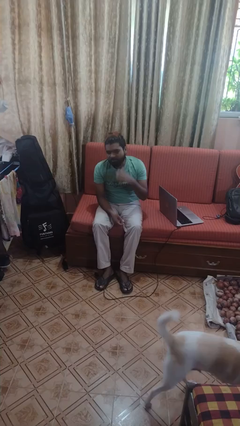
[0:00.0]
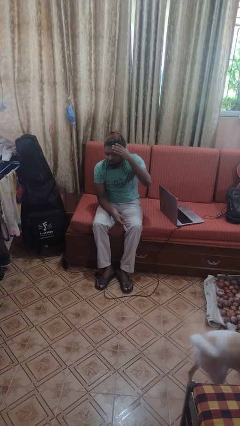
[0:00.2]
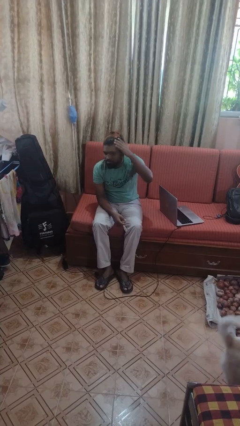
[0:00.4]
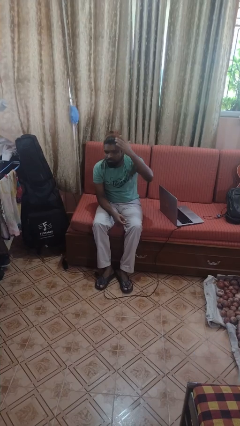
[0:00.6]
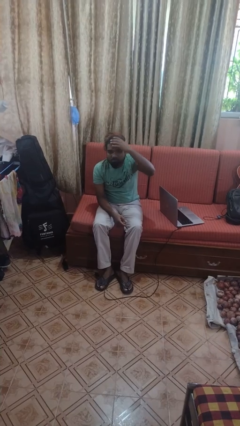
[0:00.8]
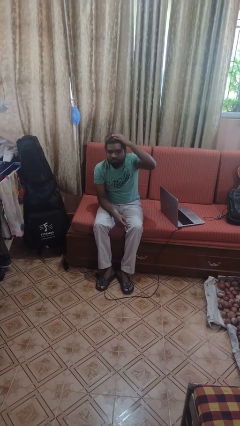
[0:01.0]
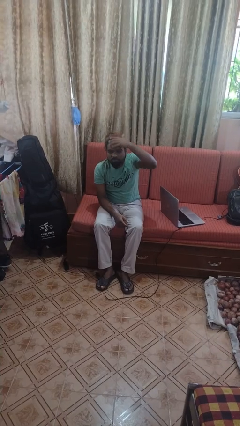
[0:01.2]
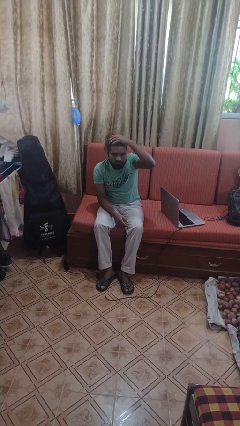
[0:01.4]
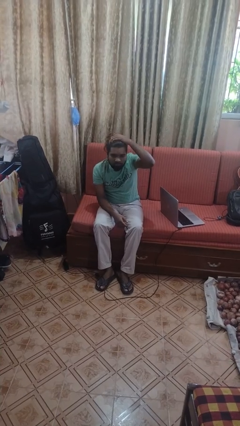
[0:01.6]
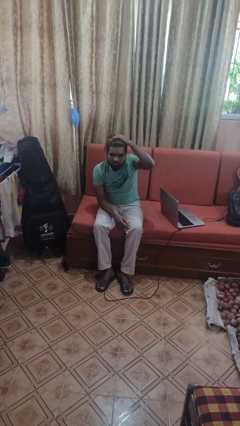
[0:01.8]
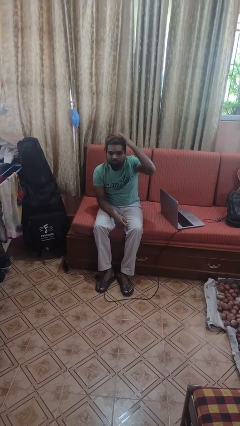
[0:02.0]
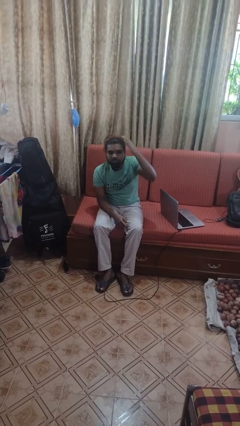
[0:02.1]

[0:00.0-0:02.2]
person strokes hair

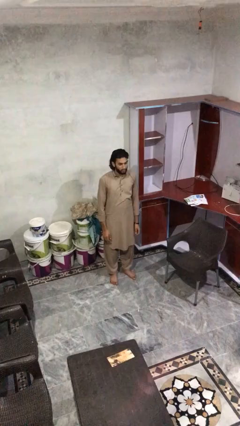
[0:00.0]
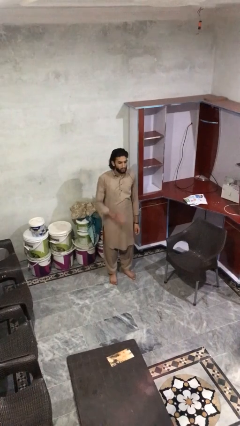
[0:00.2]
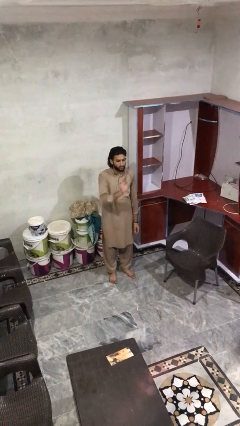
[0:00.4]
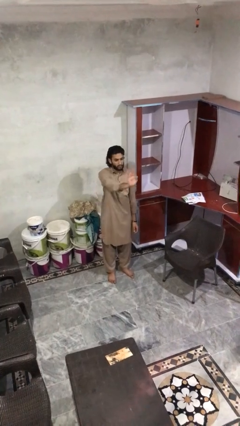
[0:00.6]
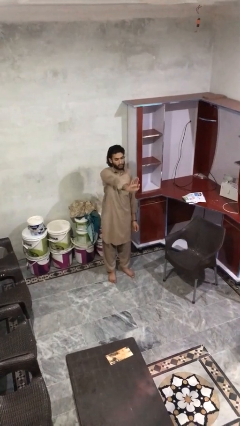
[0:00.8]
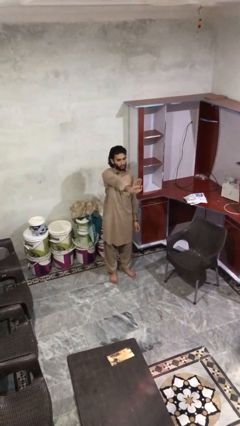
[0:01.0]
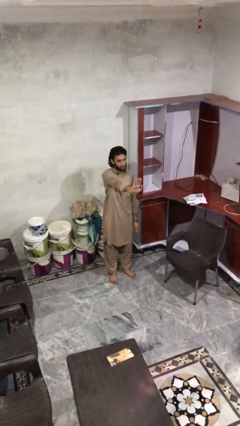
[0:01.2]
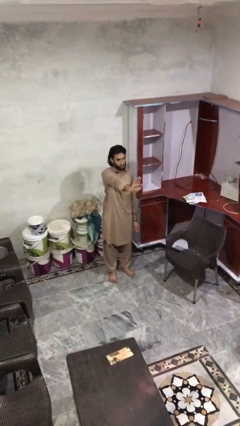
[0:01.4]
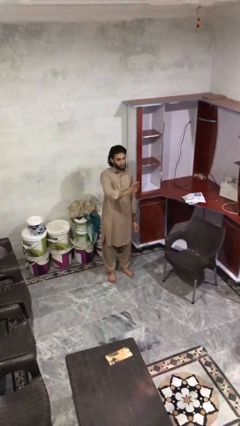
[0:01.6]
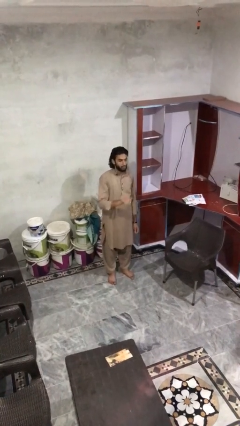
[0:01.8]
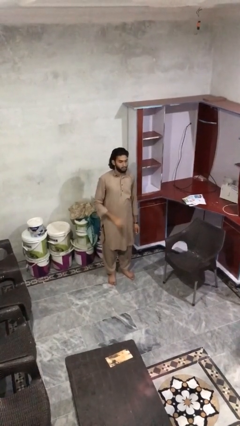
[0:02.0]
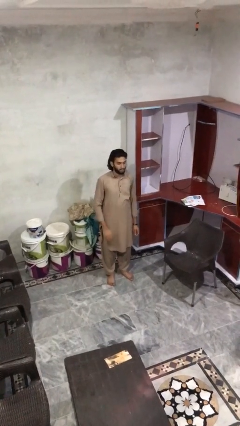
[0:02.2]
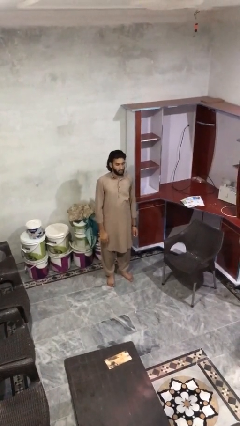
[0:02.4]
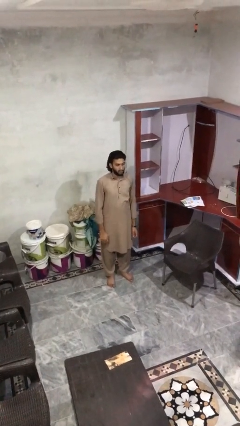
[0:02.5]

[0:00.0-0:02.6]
person gestures stop

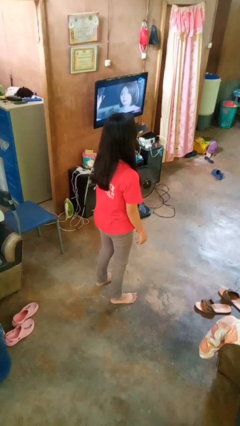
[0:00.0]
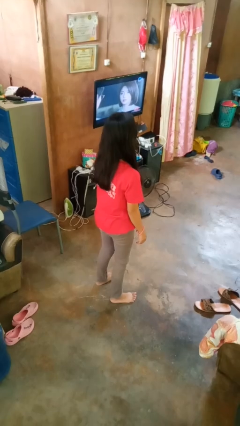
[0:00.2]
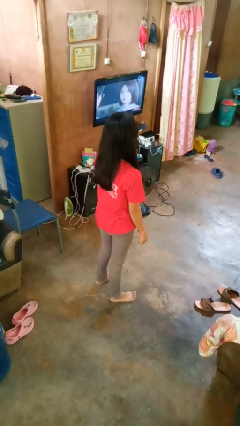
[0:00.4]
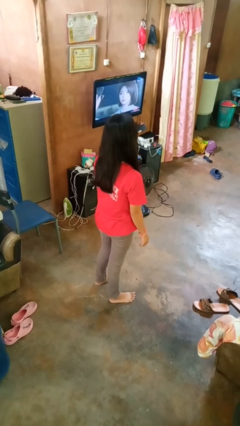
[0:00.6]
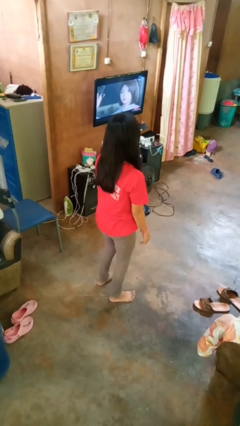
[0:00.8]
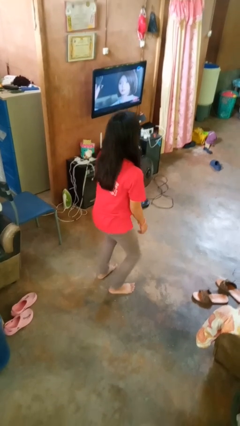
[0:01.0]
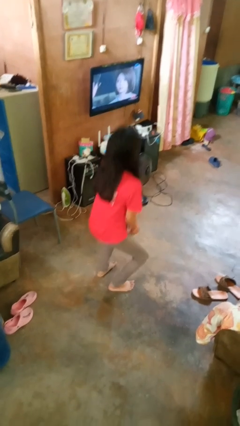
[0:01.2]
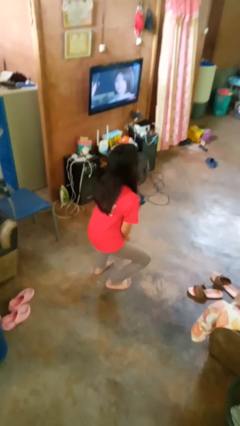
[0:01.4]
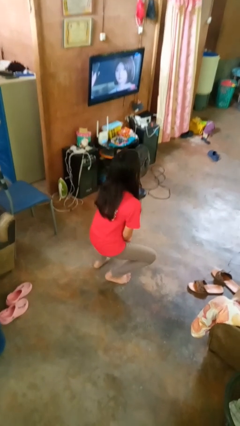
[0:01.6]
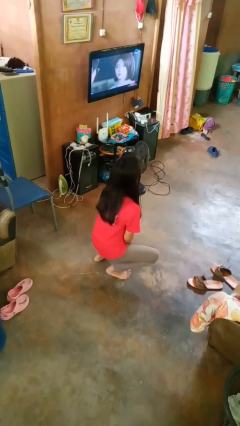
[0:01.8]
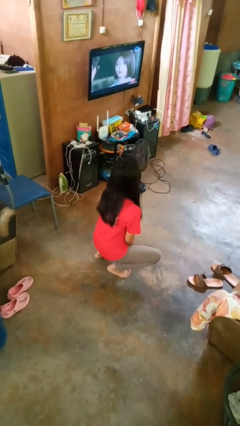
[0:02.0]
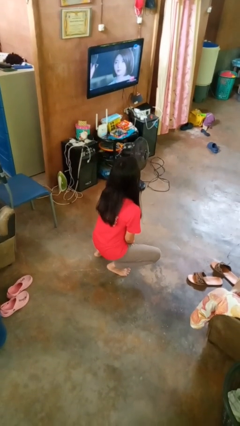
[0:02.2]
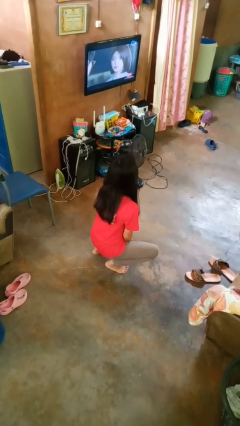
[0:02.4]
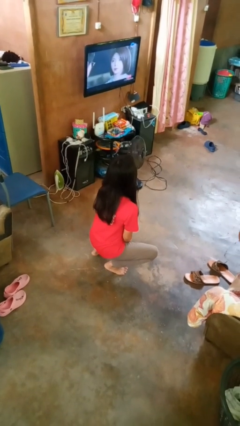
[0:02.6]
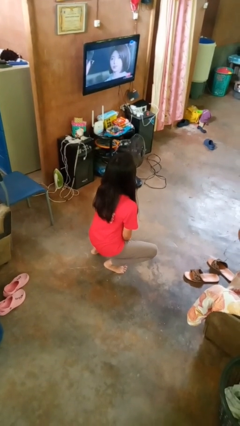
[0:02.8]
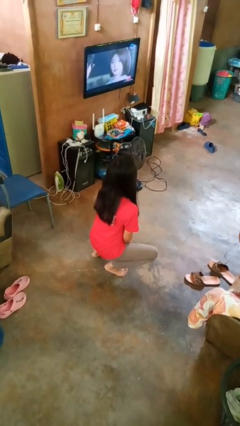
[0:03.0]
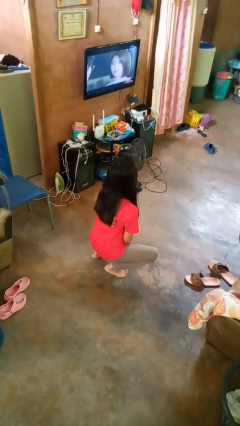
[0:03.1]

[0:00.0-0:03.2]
person squats

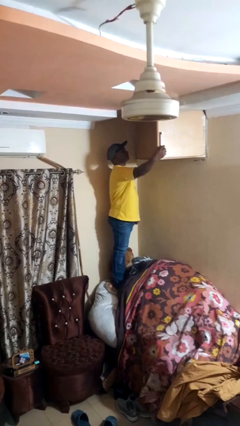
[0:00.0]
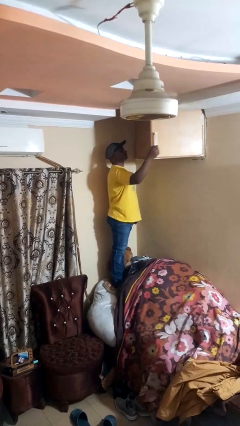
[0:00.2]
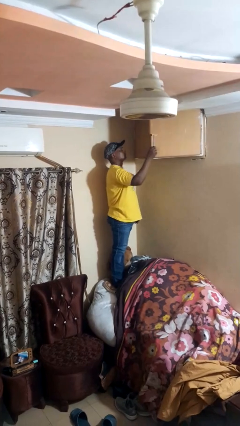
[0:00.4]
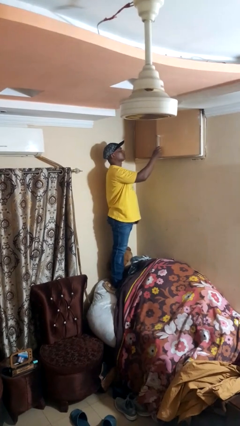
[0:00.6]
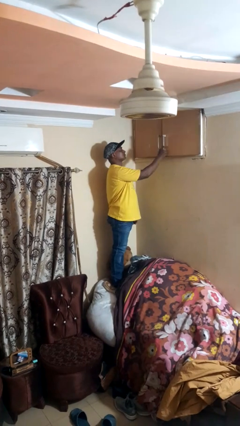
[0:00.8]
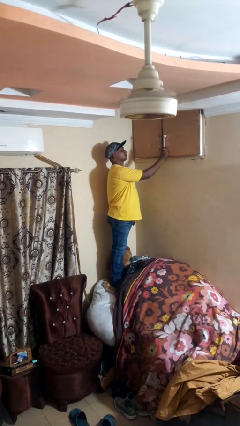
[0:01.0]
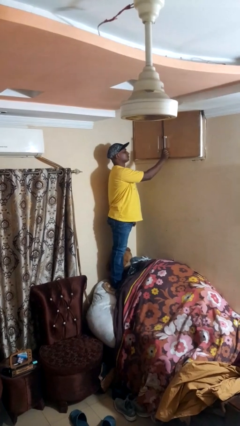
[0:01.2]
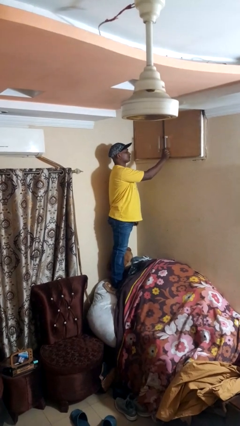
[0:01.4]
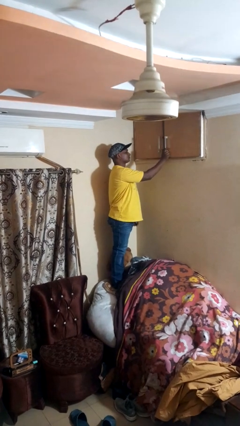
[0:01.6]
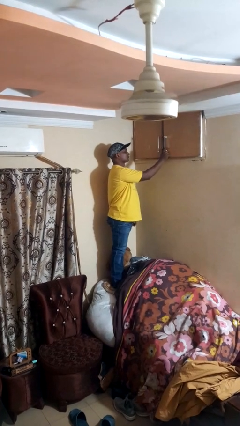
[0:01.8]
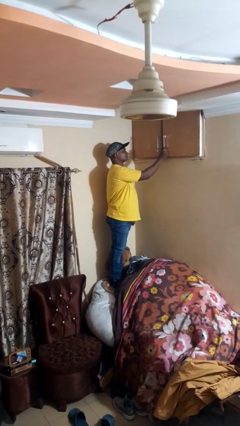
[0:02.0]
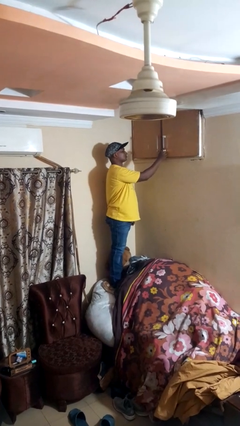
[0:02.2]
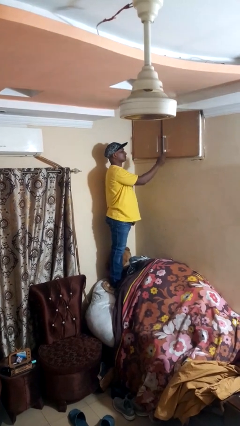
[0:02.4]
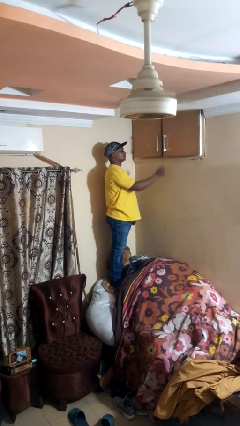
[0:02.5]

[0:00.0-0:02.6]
person closes closet door

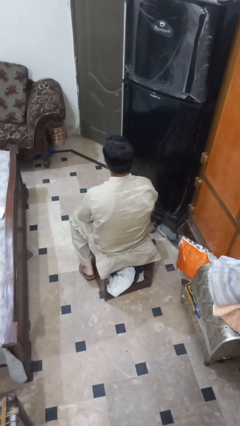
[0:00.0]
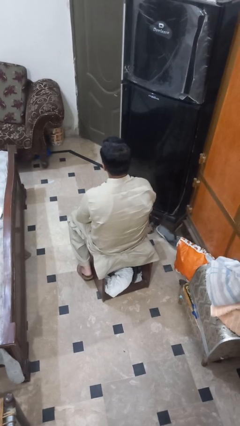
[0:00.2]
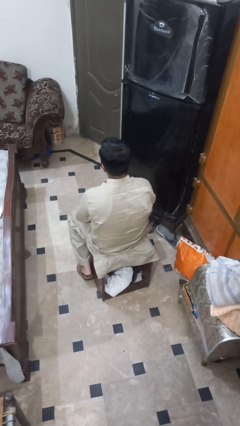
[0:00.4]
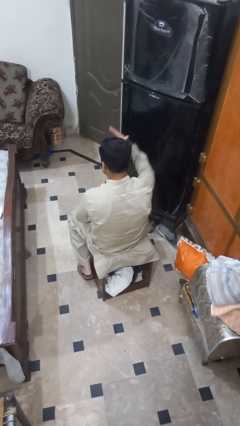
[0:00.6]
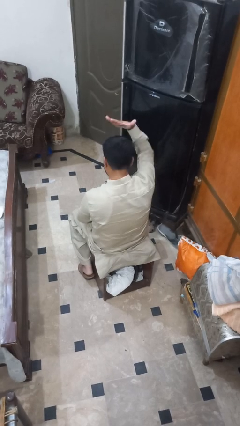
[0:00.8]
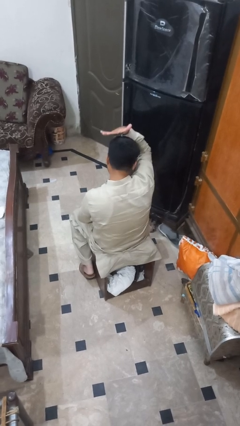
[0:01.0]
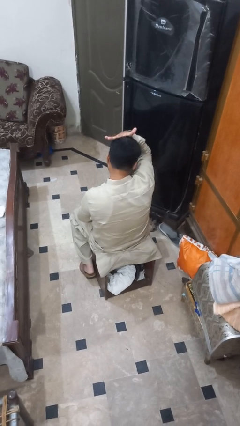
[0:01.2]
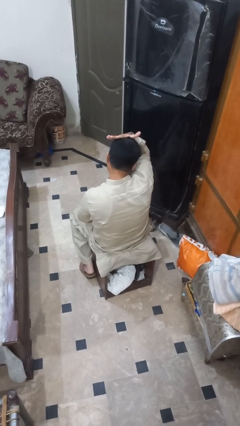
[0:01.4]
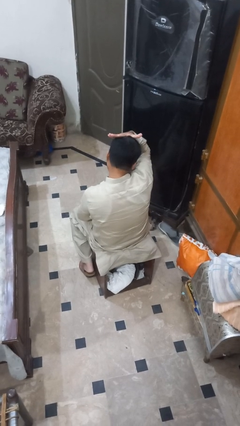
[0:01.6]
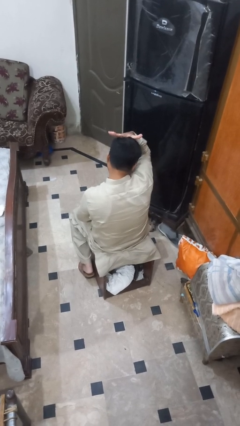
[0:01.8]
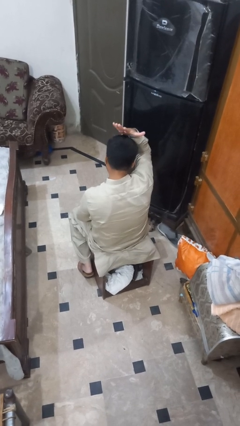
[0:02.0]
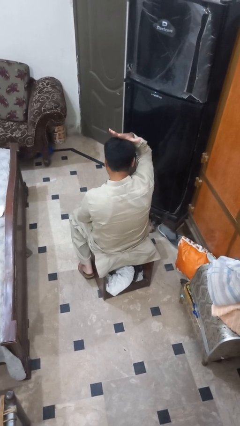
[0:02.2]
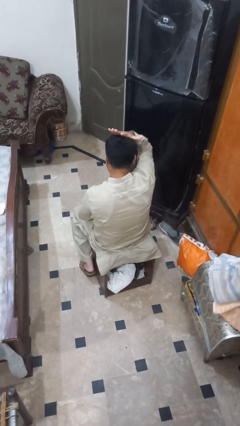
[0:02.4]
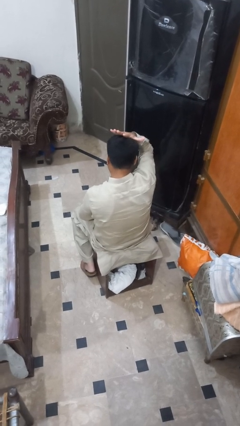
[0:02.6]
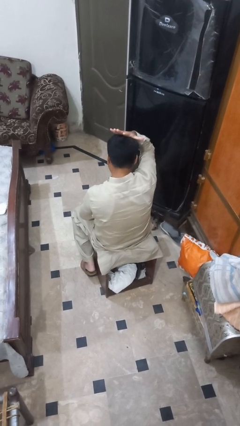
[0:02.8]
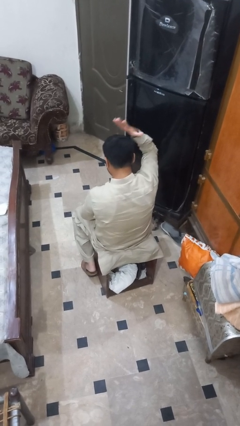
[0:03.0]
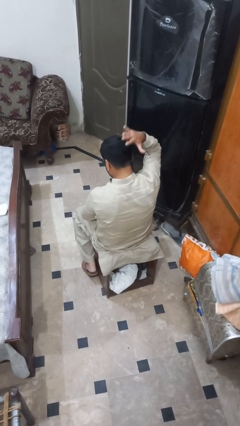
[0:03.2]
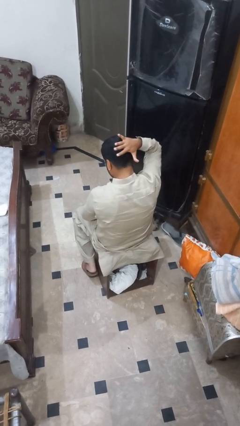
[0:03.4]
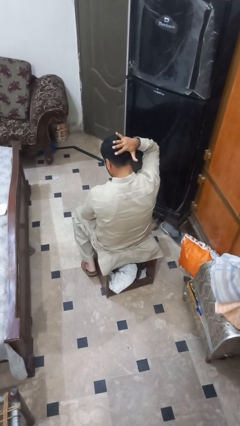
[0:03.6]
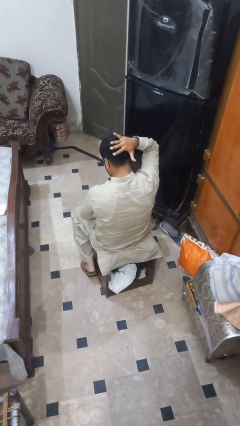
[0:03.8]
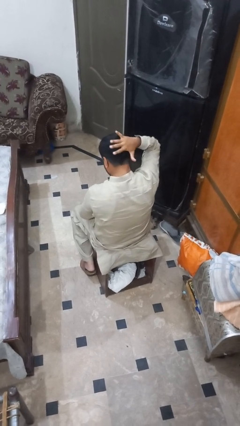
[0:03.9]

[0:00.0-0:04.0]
person pats head

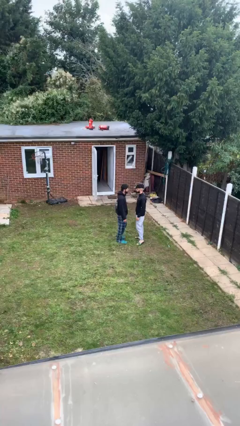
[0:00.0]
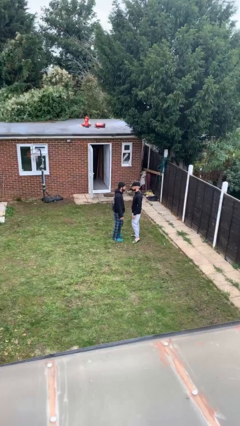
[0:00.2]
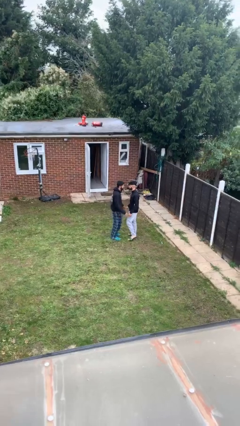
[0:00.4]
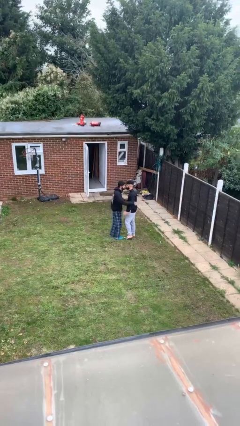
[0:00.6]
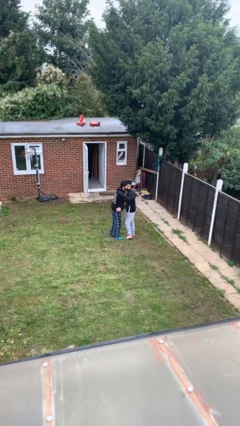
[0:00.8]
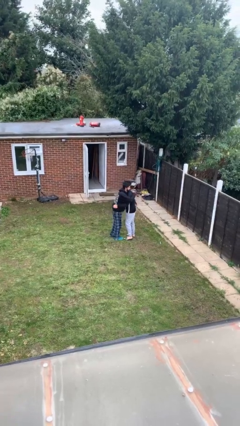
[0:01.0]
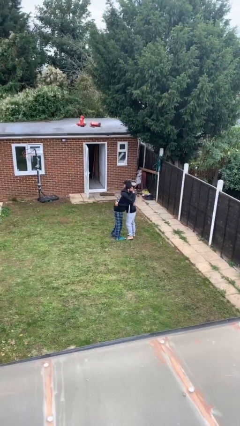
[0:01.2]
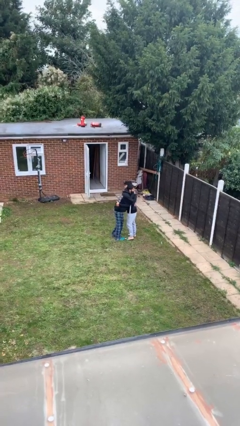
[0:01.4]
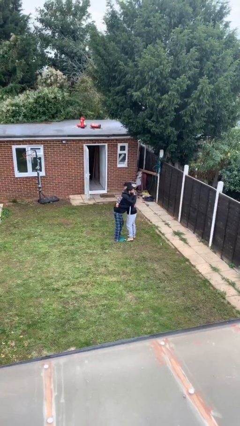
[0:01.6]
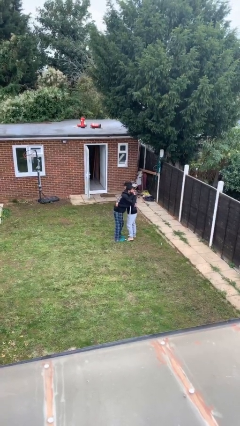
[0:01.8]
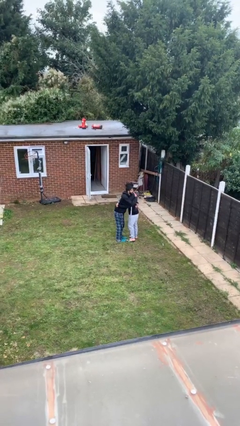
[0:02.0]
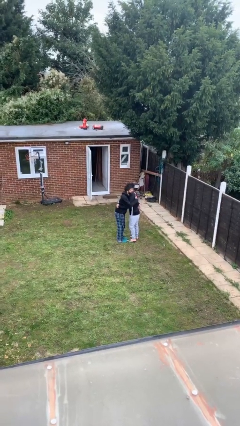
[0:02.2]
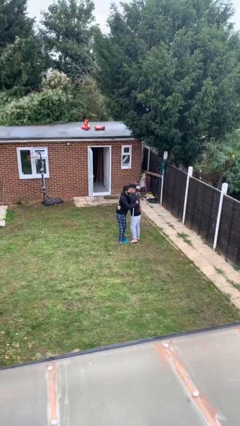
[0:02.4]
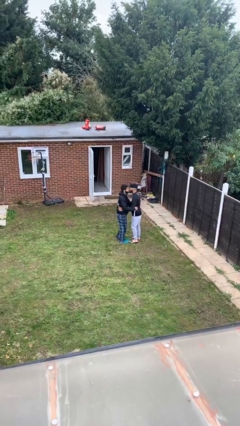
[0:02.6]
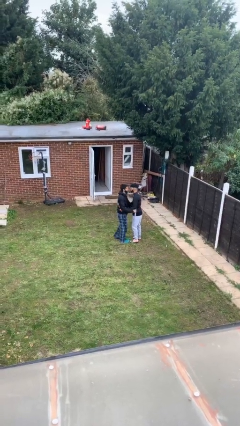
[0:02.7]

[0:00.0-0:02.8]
person embraces person

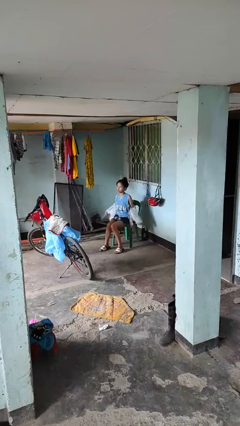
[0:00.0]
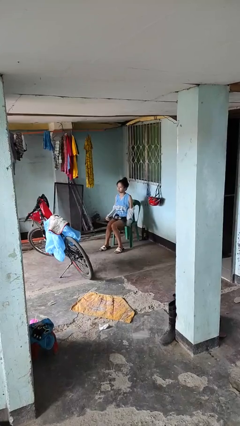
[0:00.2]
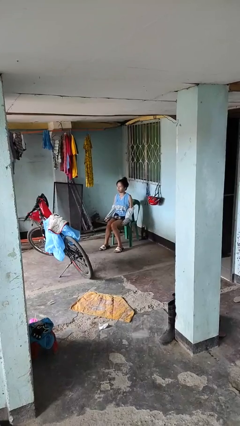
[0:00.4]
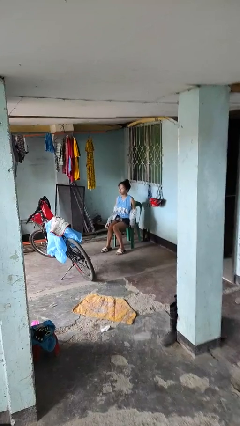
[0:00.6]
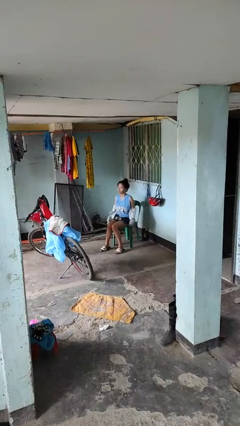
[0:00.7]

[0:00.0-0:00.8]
person takes off jacket
